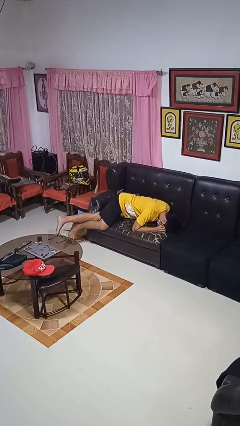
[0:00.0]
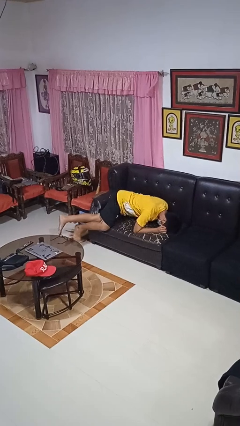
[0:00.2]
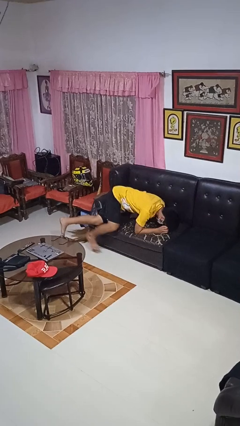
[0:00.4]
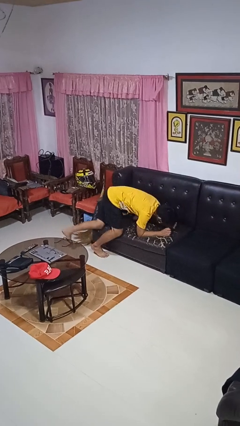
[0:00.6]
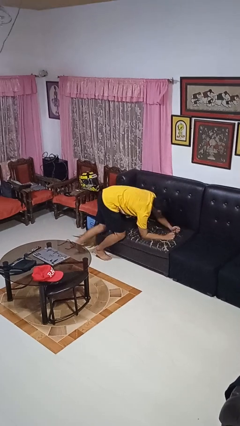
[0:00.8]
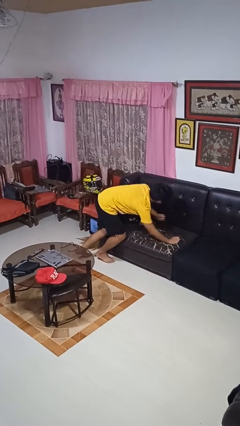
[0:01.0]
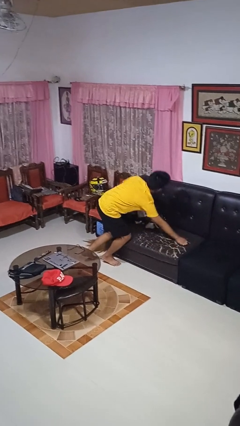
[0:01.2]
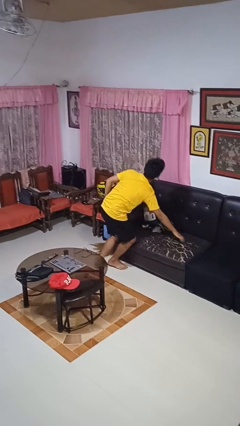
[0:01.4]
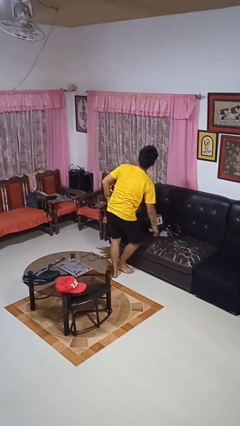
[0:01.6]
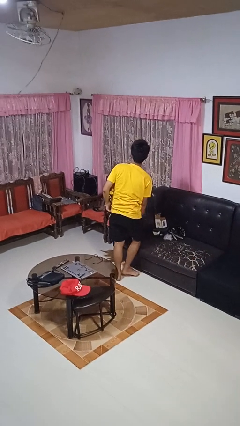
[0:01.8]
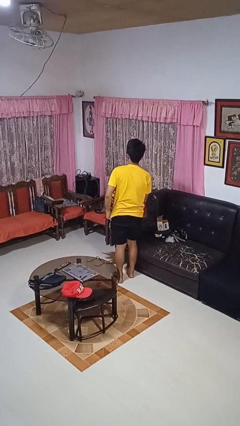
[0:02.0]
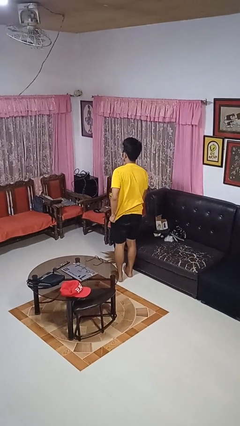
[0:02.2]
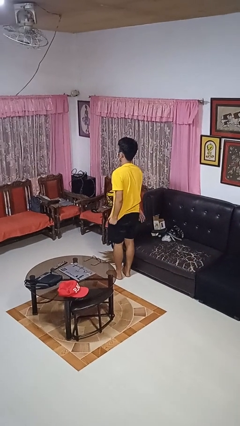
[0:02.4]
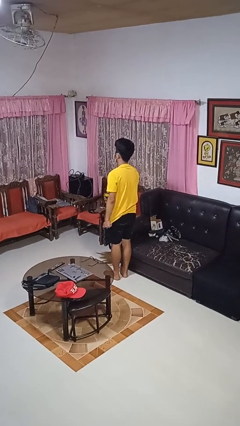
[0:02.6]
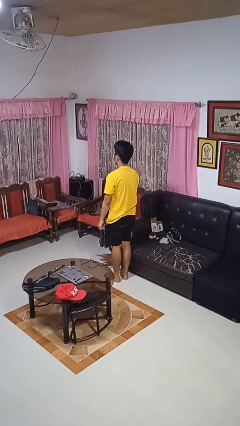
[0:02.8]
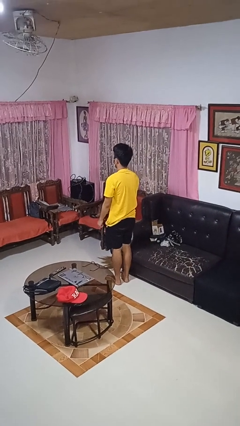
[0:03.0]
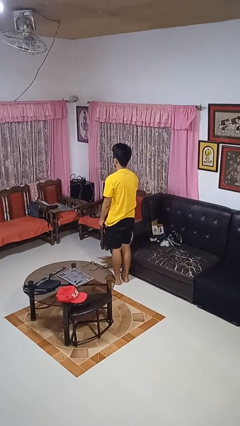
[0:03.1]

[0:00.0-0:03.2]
person stands up

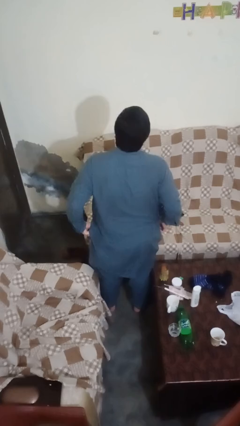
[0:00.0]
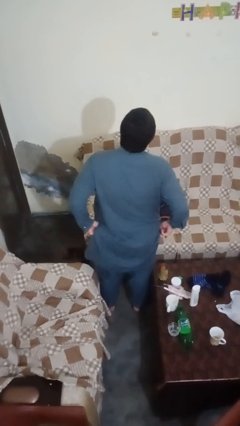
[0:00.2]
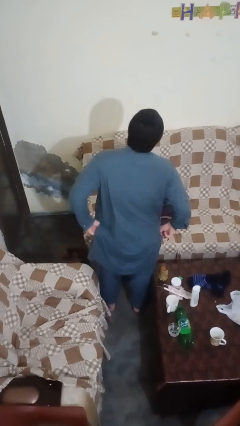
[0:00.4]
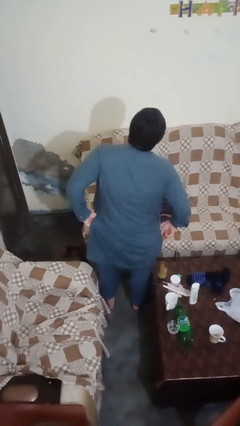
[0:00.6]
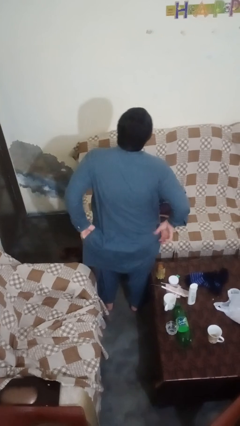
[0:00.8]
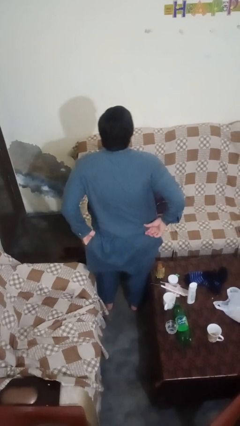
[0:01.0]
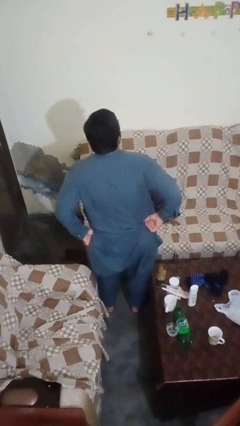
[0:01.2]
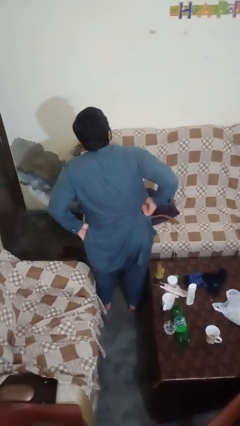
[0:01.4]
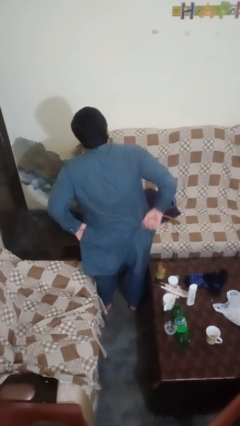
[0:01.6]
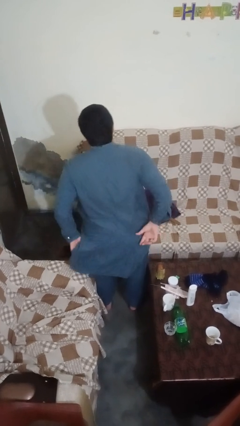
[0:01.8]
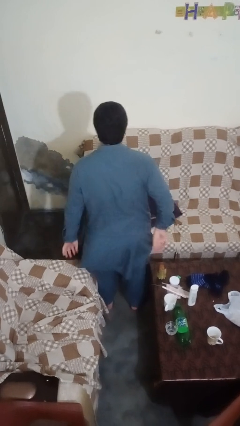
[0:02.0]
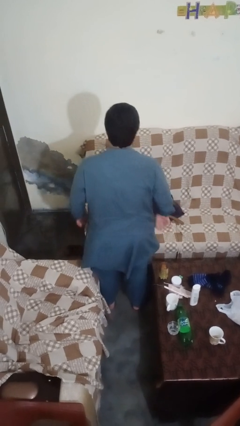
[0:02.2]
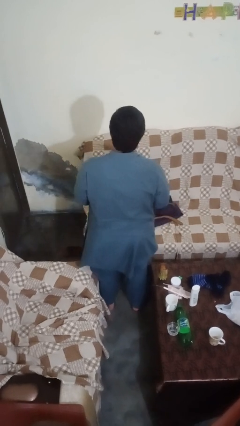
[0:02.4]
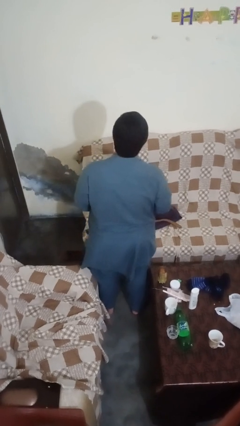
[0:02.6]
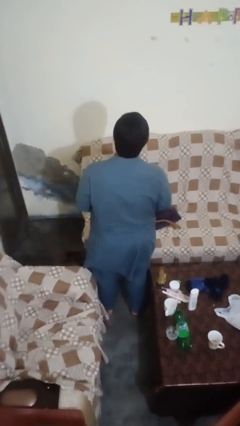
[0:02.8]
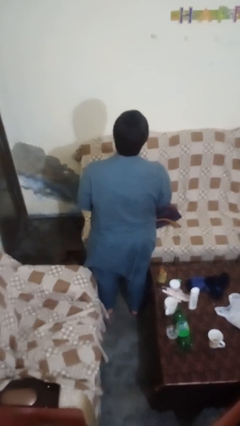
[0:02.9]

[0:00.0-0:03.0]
person hikes up pants

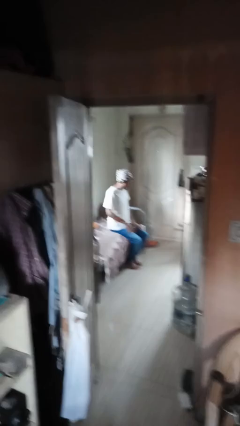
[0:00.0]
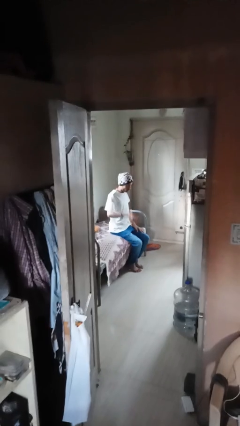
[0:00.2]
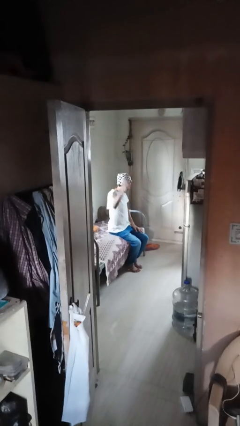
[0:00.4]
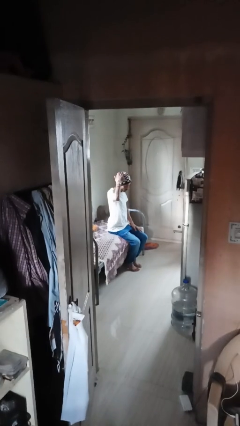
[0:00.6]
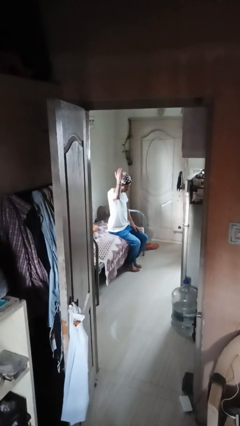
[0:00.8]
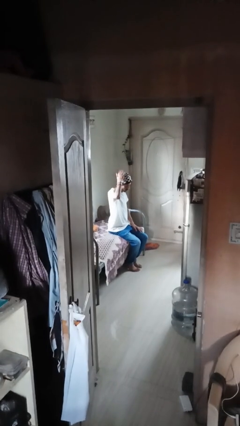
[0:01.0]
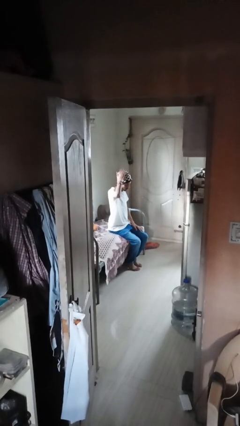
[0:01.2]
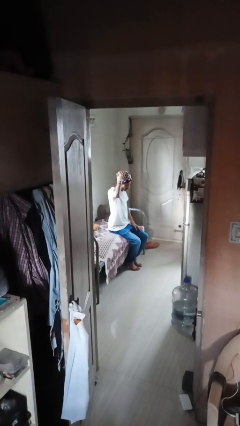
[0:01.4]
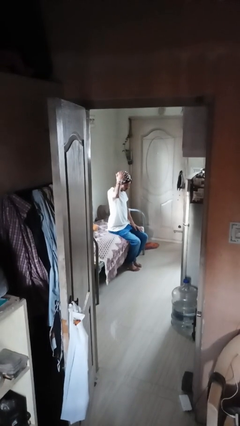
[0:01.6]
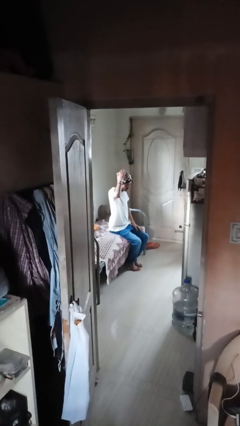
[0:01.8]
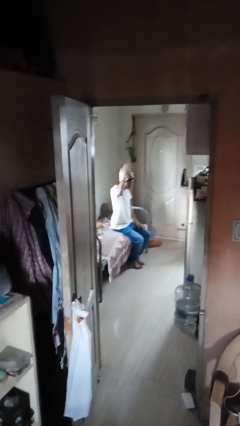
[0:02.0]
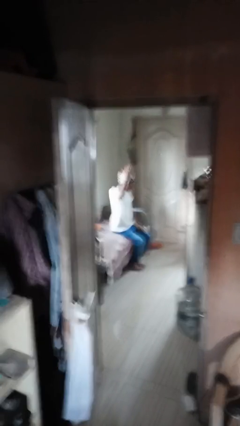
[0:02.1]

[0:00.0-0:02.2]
person pats head

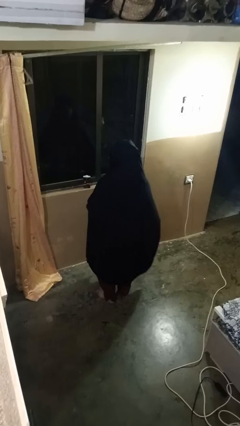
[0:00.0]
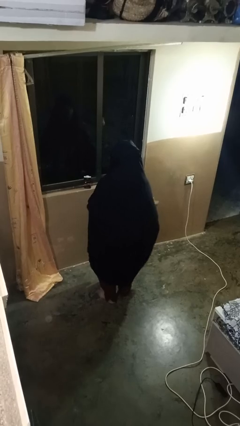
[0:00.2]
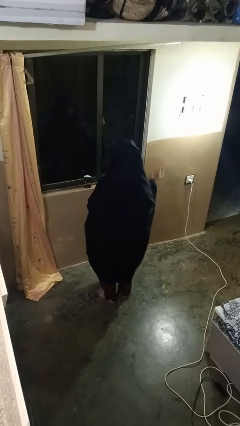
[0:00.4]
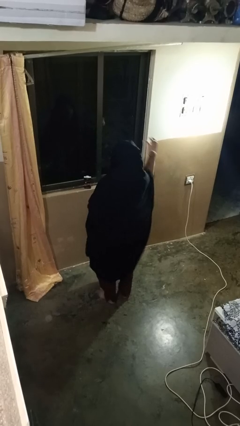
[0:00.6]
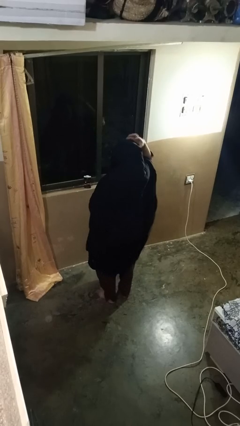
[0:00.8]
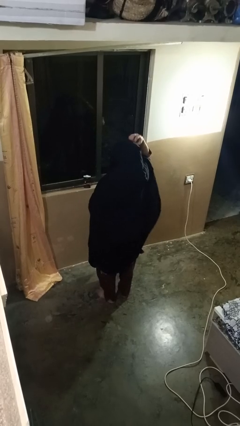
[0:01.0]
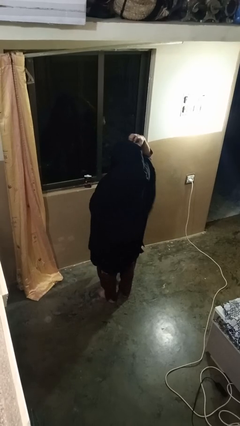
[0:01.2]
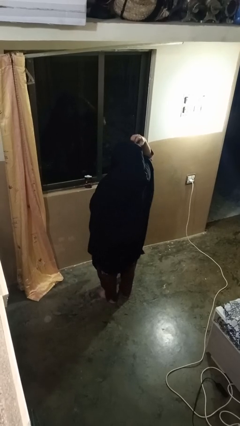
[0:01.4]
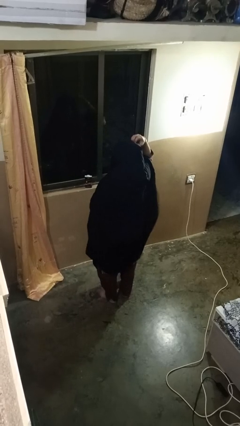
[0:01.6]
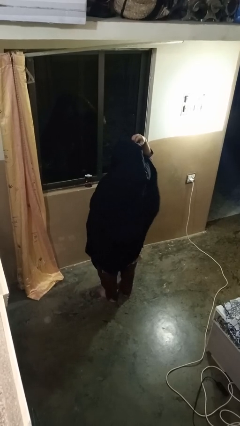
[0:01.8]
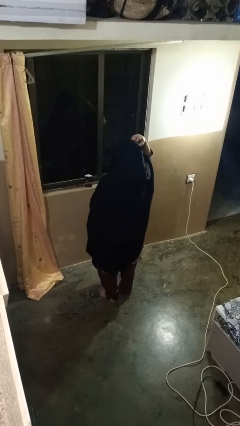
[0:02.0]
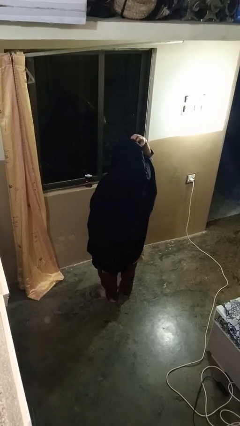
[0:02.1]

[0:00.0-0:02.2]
person scratches face

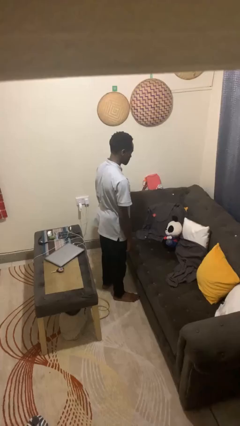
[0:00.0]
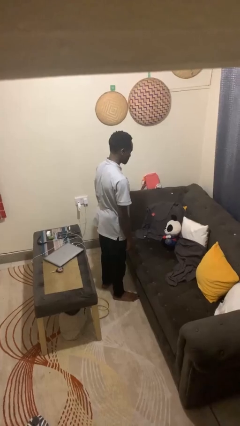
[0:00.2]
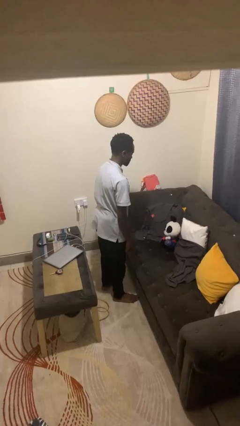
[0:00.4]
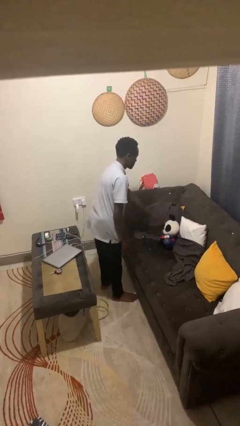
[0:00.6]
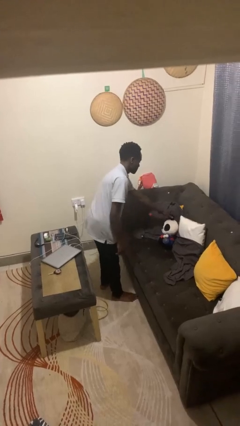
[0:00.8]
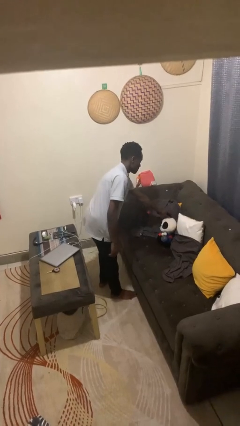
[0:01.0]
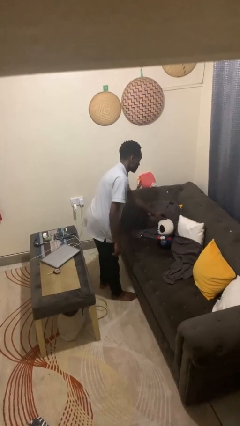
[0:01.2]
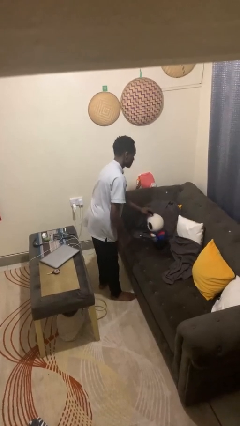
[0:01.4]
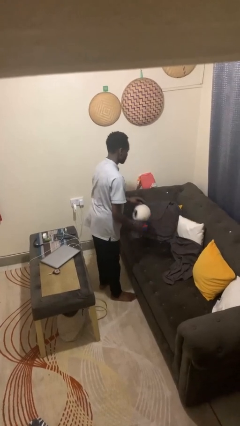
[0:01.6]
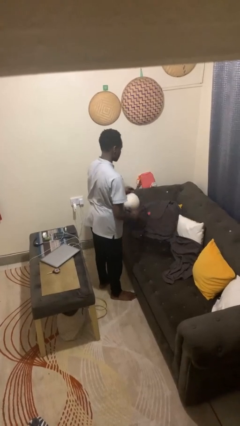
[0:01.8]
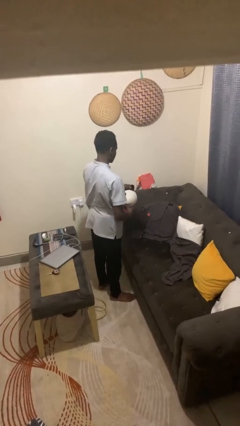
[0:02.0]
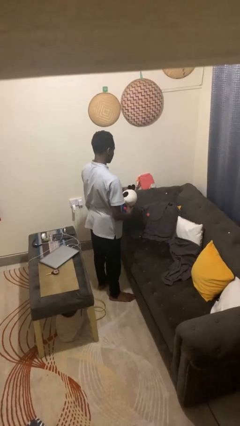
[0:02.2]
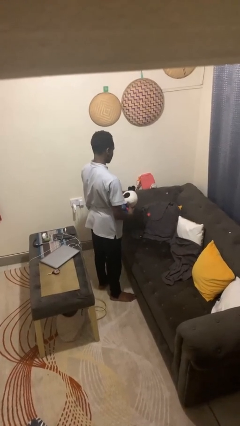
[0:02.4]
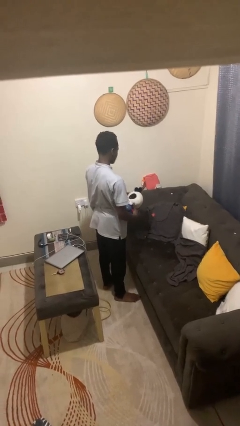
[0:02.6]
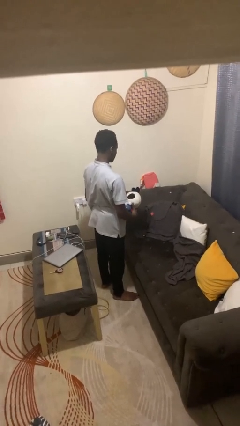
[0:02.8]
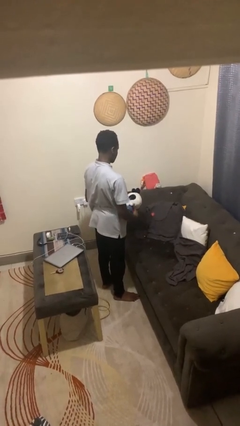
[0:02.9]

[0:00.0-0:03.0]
person picks up object from couch

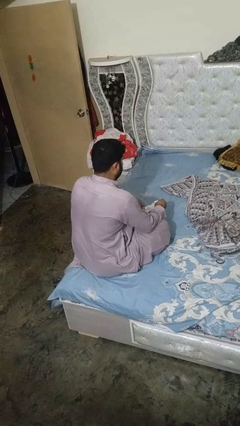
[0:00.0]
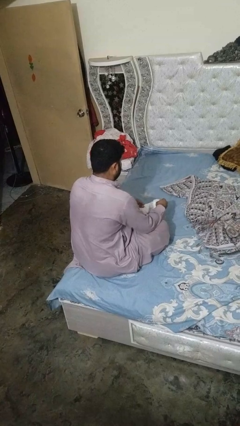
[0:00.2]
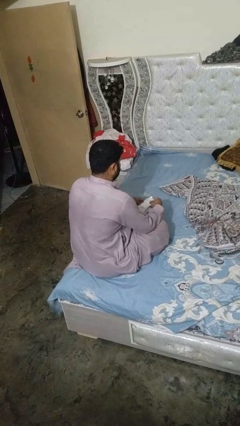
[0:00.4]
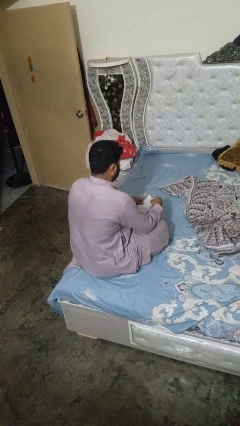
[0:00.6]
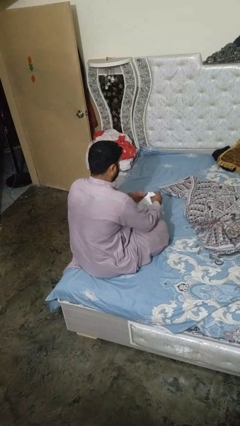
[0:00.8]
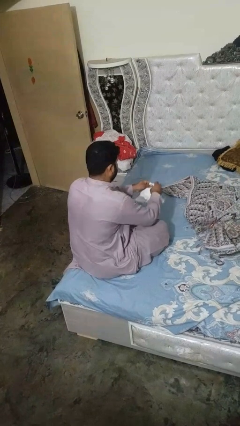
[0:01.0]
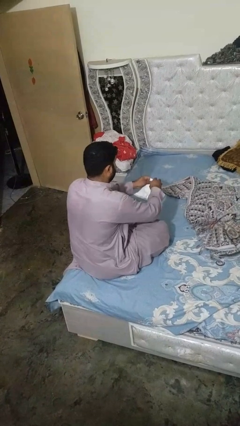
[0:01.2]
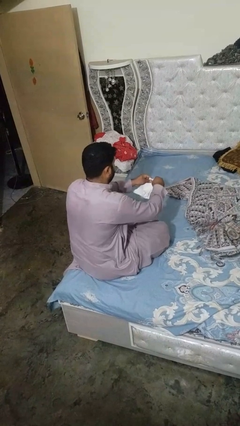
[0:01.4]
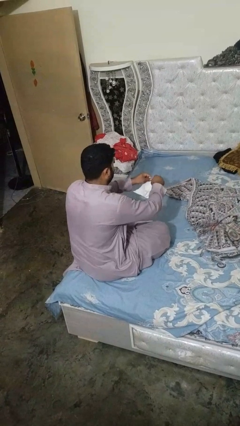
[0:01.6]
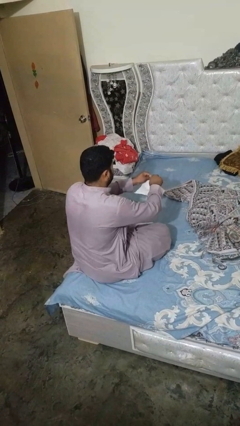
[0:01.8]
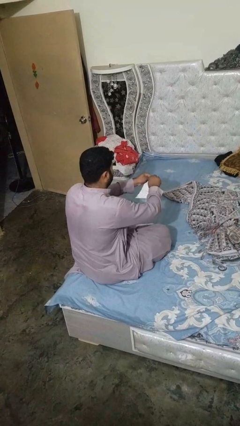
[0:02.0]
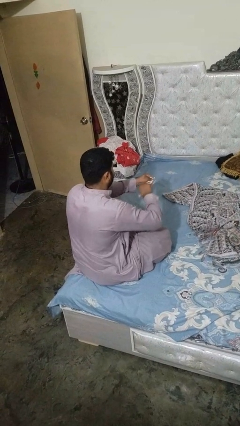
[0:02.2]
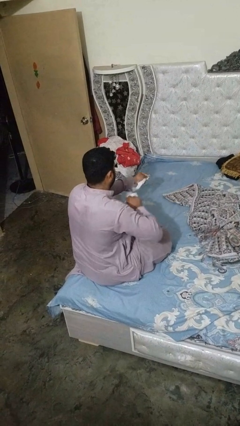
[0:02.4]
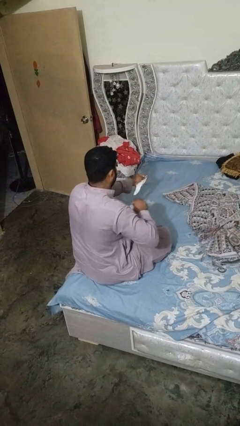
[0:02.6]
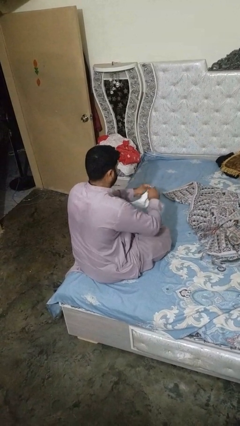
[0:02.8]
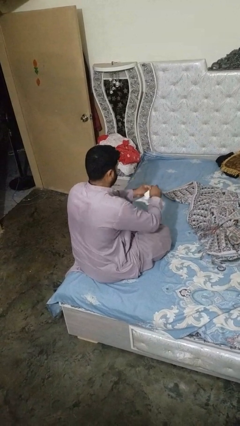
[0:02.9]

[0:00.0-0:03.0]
person tears paper

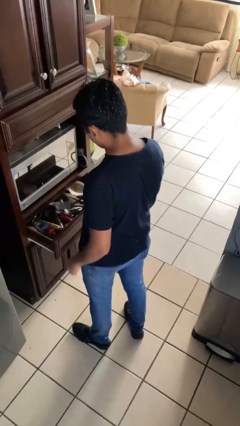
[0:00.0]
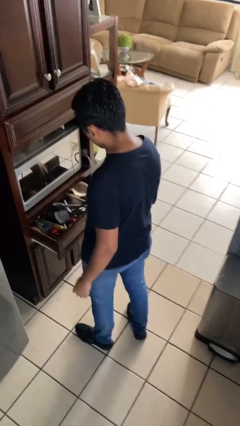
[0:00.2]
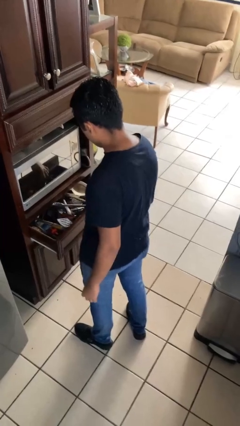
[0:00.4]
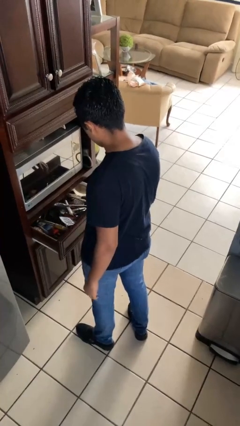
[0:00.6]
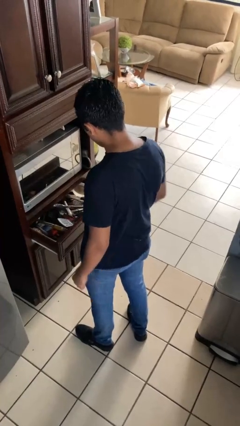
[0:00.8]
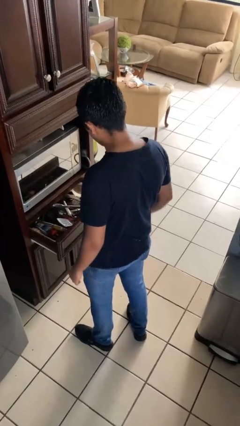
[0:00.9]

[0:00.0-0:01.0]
person puts object into kitchen drawer
